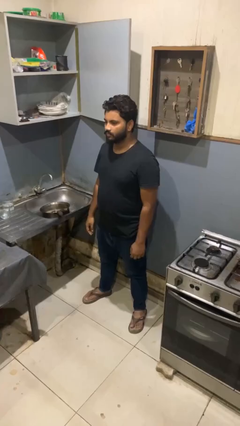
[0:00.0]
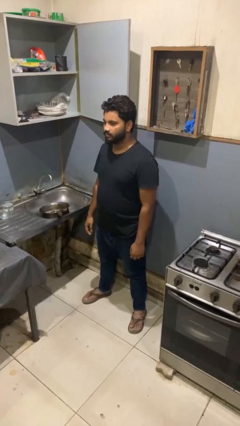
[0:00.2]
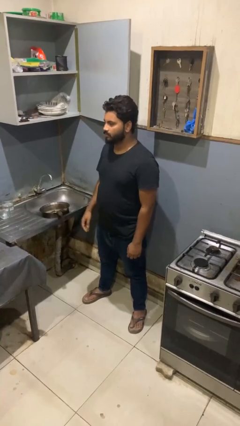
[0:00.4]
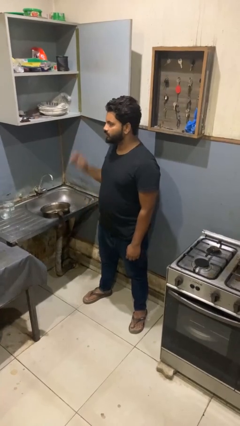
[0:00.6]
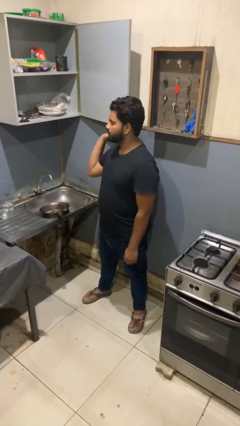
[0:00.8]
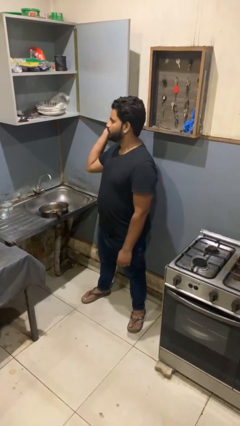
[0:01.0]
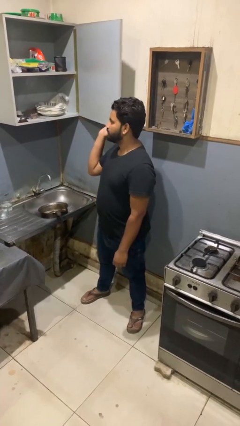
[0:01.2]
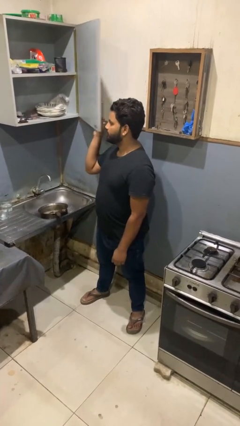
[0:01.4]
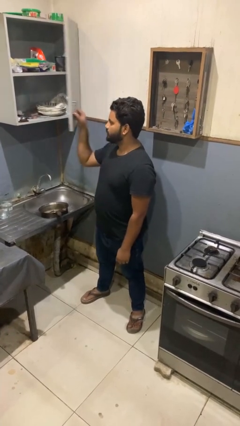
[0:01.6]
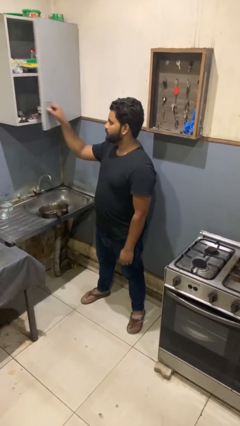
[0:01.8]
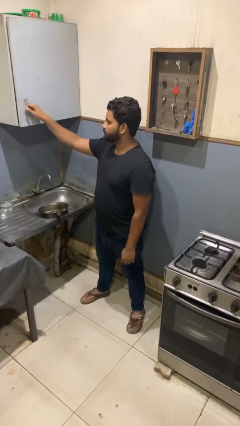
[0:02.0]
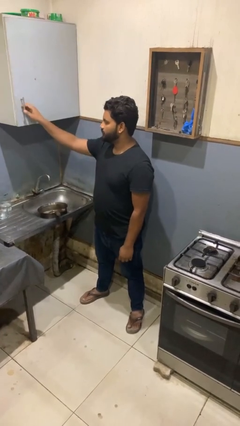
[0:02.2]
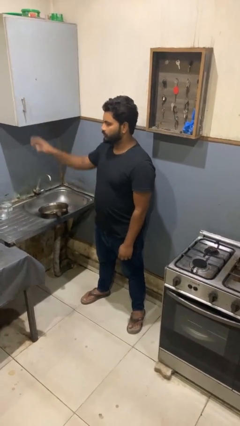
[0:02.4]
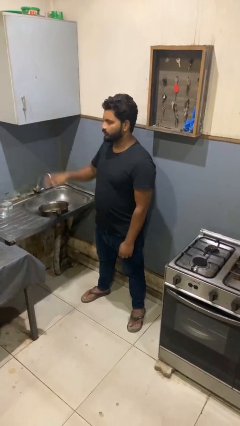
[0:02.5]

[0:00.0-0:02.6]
person closes kitchen drawer

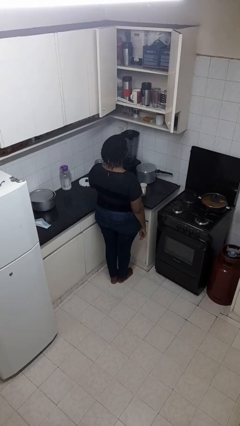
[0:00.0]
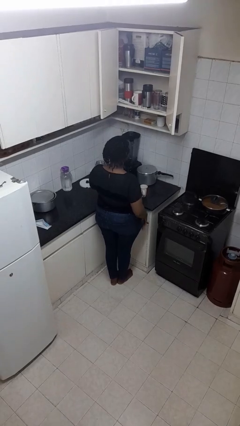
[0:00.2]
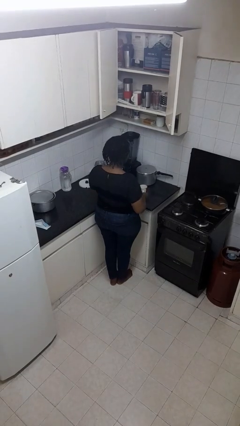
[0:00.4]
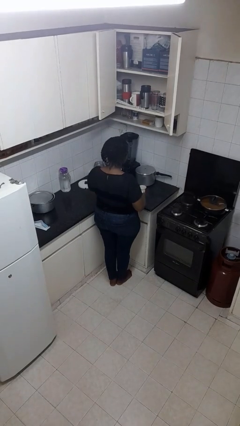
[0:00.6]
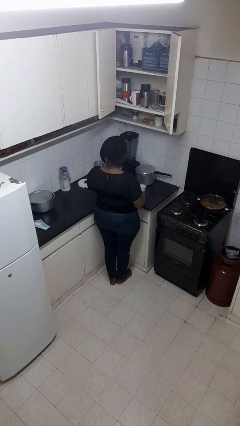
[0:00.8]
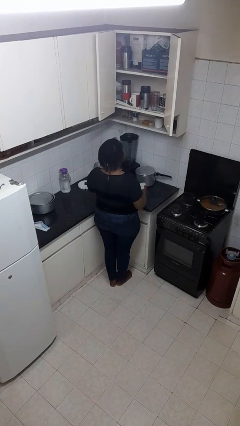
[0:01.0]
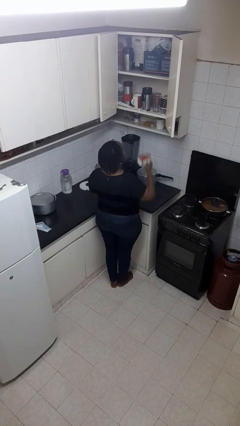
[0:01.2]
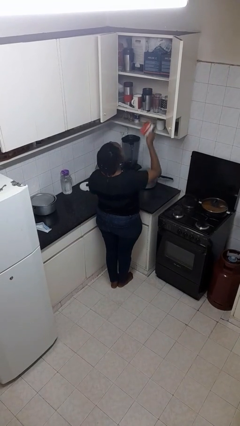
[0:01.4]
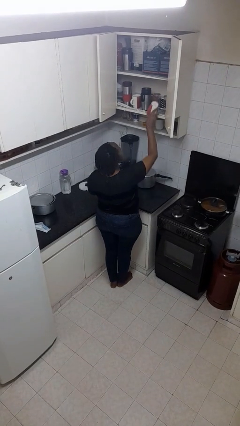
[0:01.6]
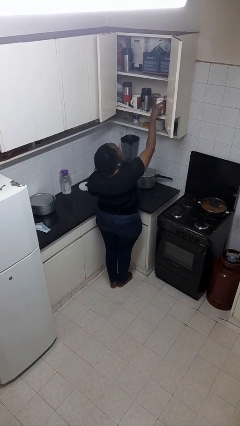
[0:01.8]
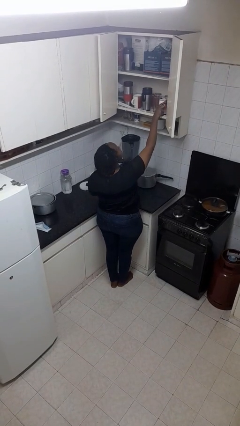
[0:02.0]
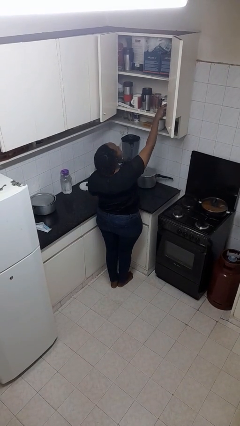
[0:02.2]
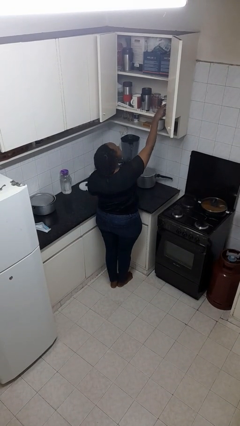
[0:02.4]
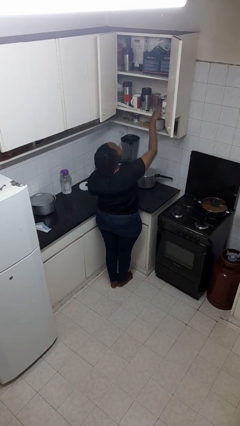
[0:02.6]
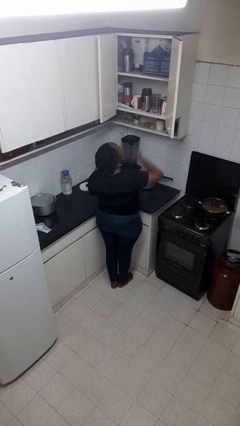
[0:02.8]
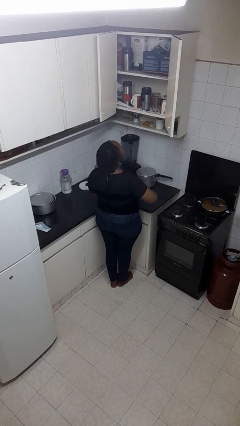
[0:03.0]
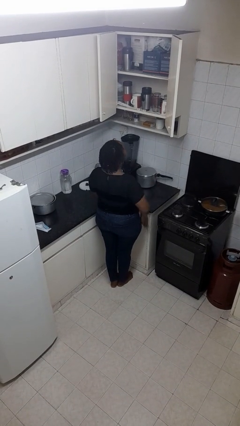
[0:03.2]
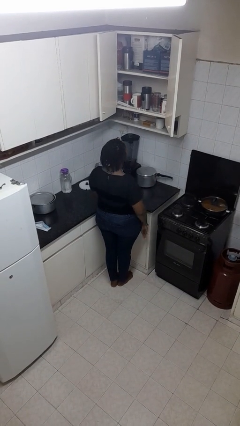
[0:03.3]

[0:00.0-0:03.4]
person puts object in cabinet

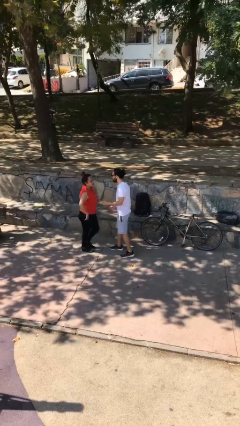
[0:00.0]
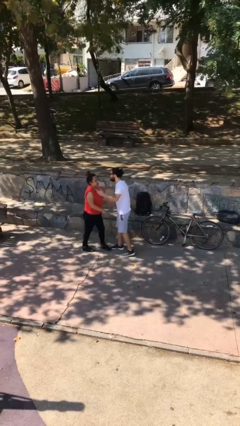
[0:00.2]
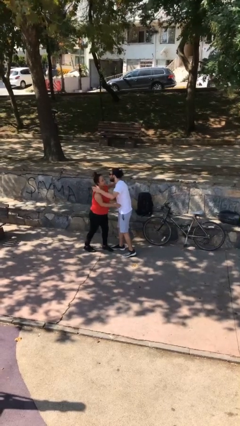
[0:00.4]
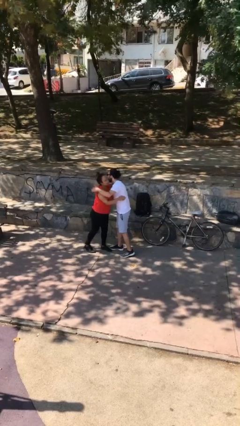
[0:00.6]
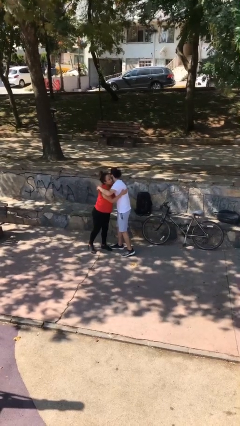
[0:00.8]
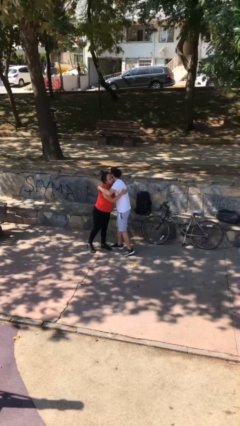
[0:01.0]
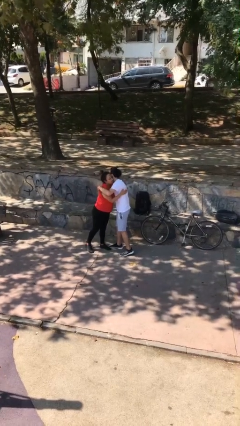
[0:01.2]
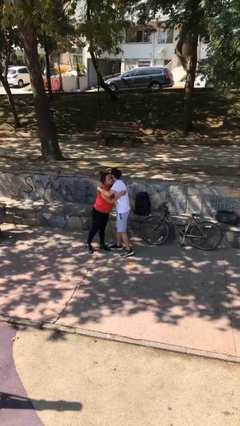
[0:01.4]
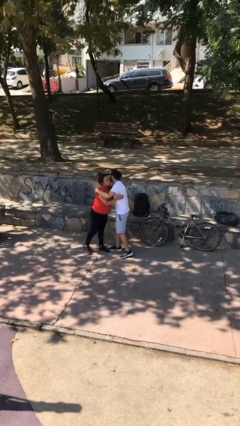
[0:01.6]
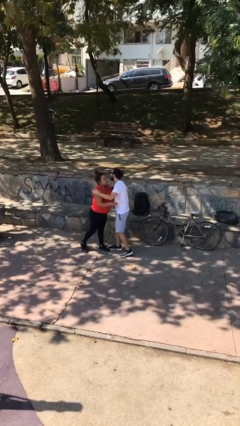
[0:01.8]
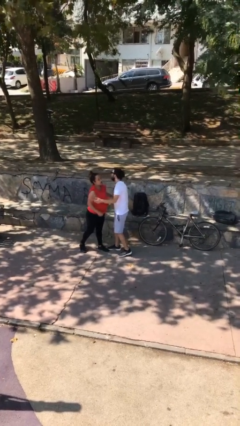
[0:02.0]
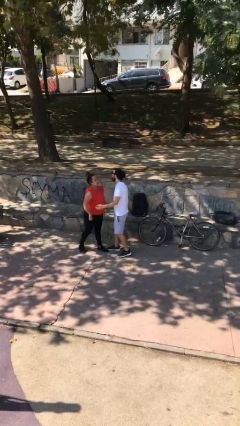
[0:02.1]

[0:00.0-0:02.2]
person embraces person

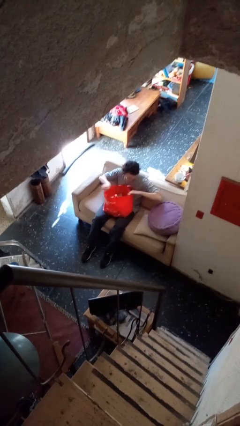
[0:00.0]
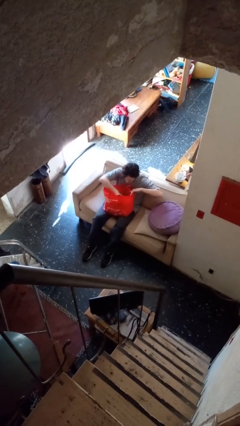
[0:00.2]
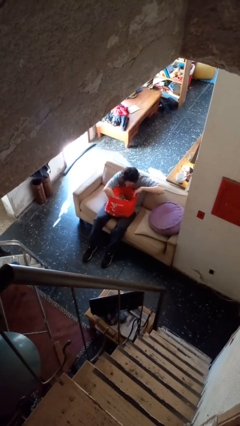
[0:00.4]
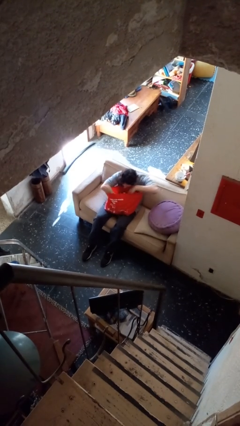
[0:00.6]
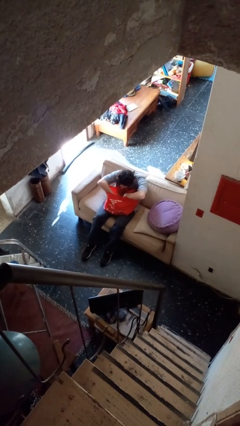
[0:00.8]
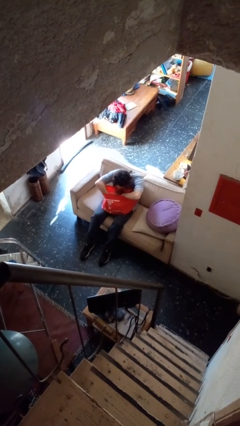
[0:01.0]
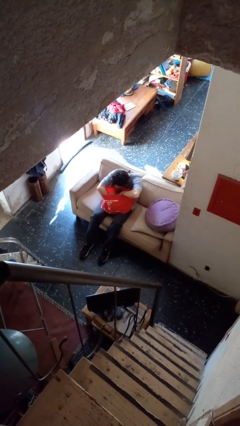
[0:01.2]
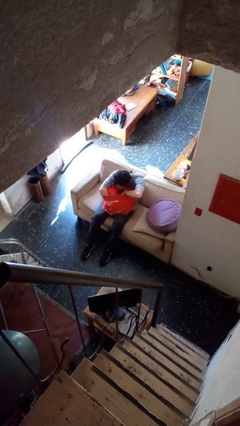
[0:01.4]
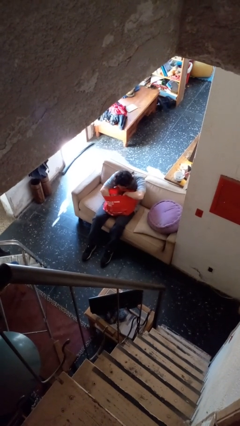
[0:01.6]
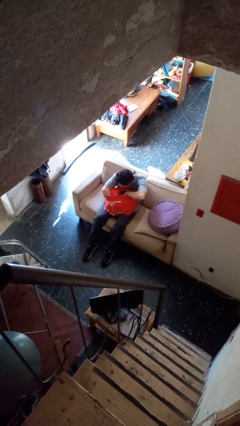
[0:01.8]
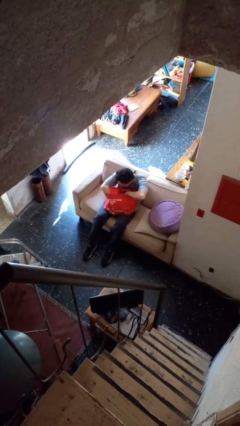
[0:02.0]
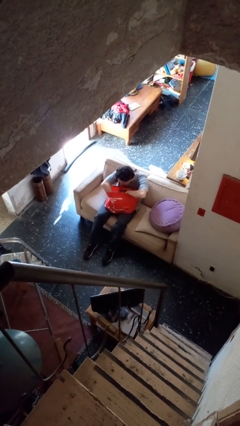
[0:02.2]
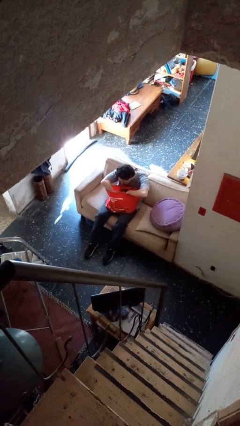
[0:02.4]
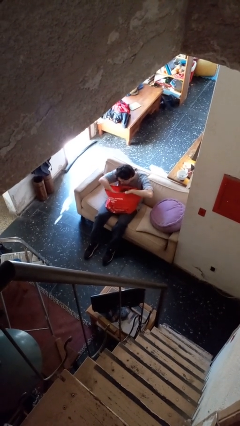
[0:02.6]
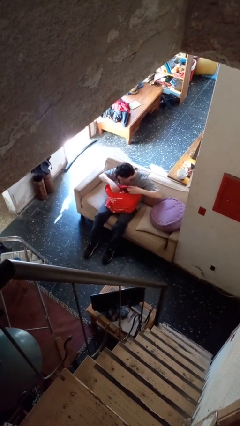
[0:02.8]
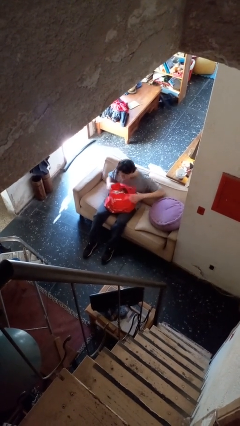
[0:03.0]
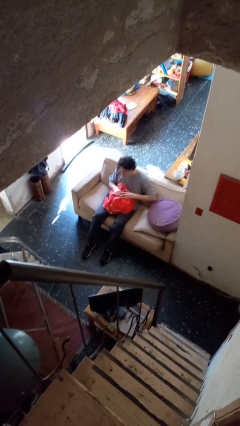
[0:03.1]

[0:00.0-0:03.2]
person searches in bag

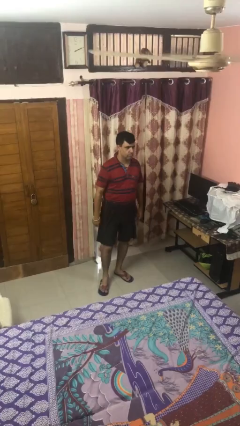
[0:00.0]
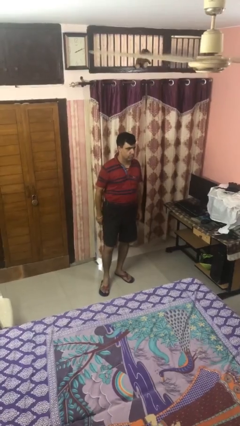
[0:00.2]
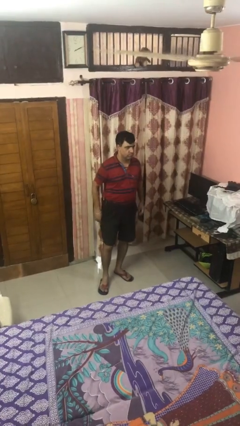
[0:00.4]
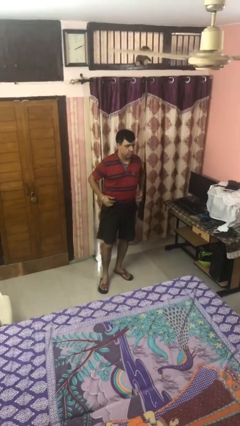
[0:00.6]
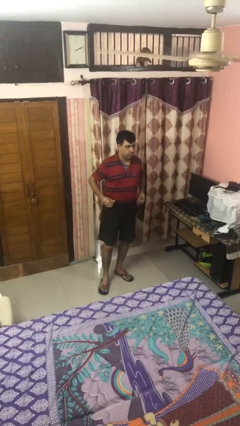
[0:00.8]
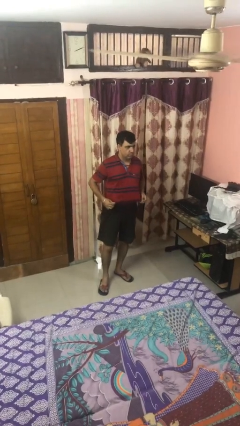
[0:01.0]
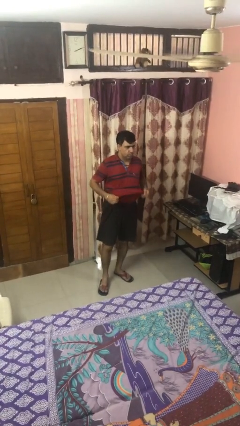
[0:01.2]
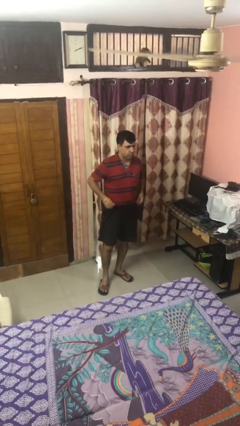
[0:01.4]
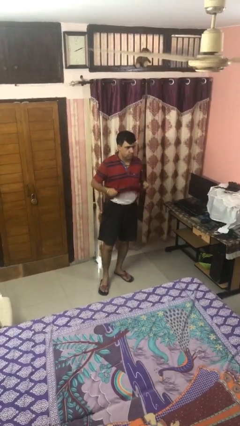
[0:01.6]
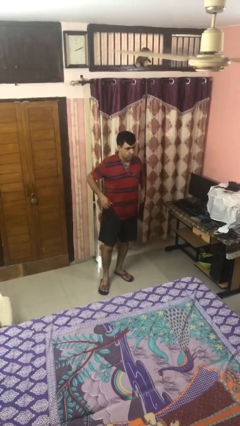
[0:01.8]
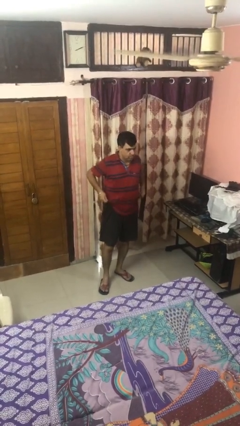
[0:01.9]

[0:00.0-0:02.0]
person untucks shirt

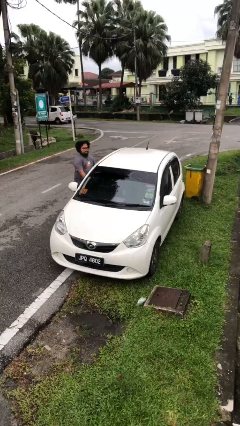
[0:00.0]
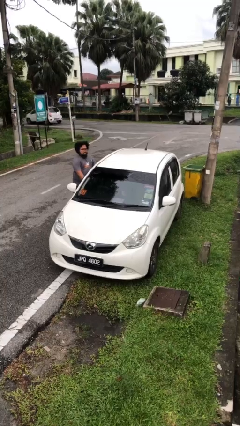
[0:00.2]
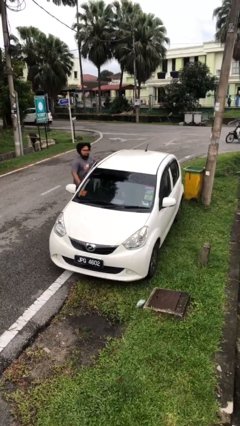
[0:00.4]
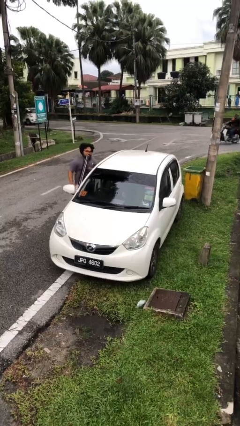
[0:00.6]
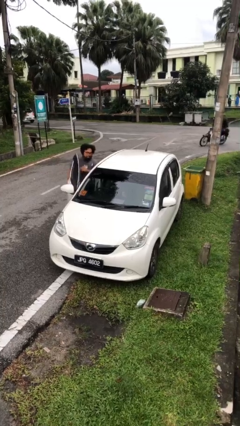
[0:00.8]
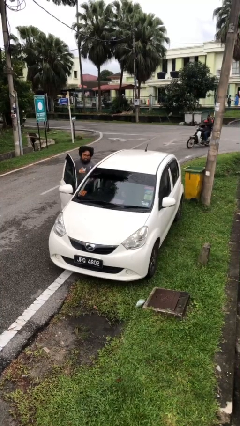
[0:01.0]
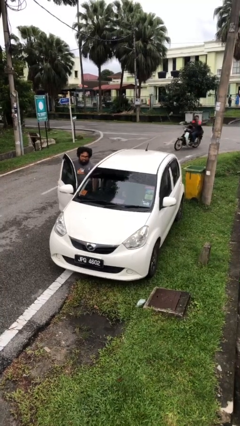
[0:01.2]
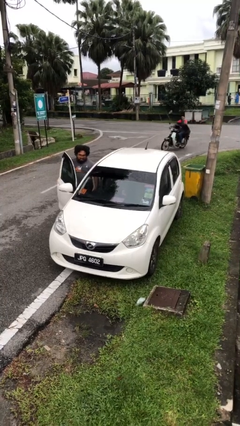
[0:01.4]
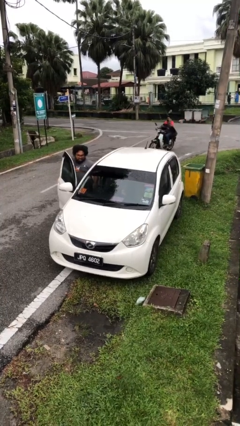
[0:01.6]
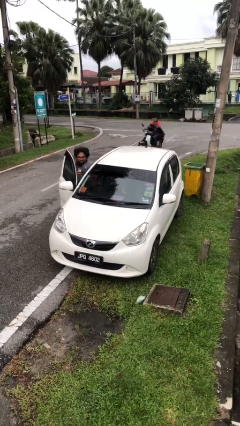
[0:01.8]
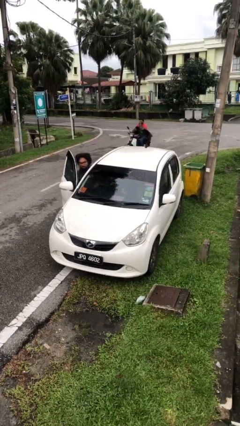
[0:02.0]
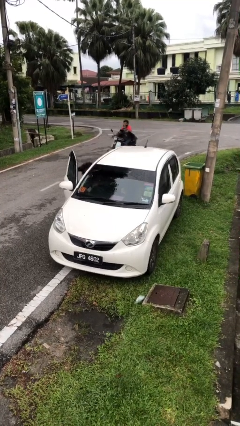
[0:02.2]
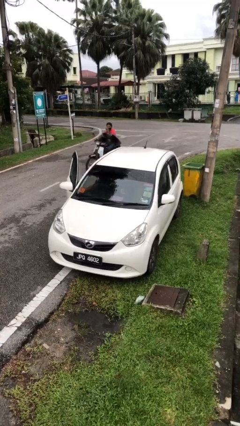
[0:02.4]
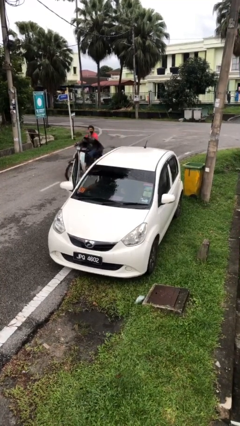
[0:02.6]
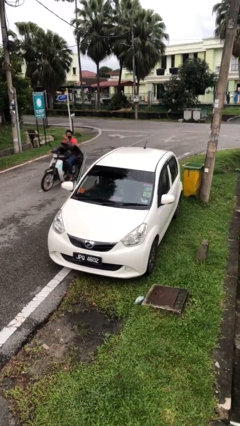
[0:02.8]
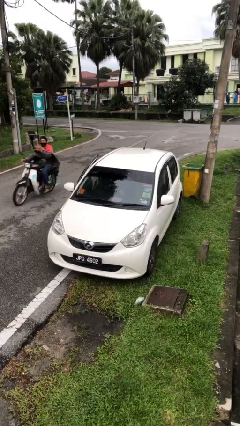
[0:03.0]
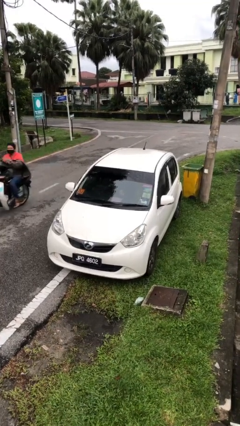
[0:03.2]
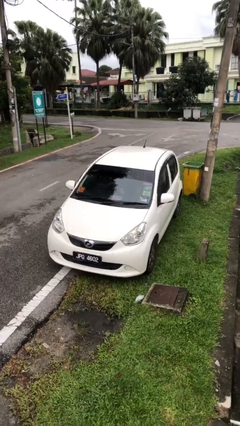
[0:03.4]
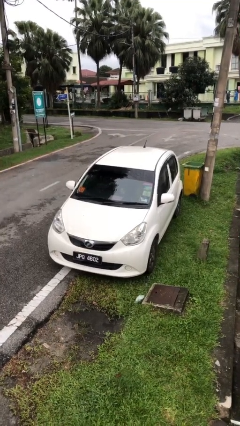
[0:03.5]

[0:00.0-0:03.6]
car picks up person

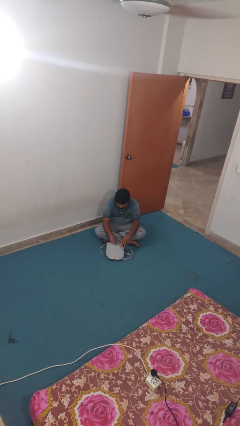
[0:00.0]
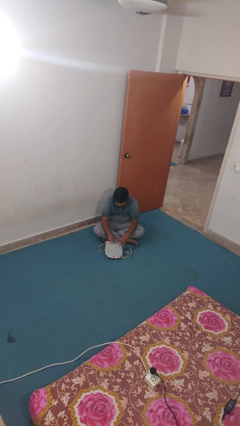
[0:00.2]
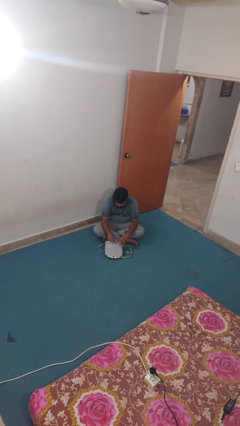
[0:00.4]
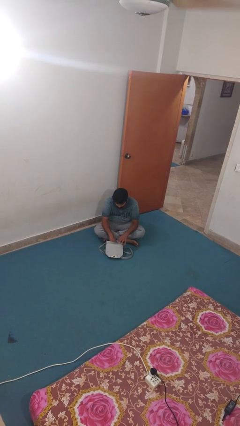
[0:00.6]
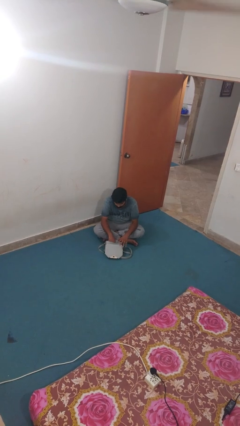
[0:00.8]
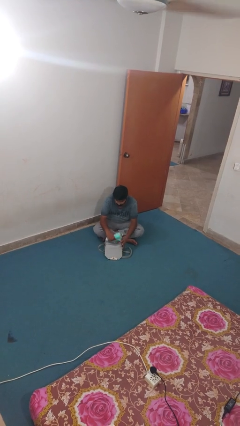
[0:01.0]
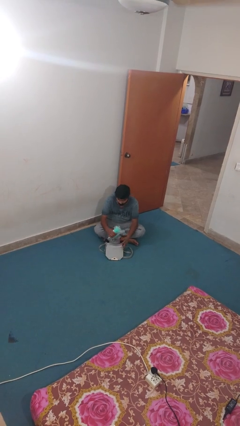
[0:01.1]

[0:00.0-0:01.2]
person takes object from purse
